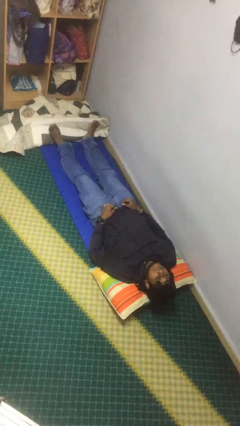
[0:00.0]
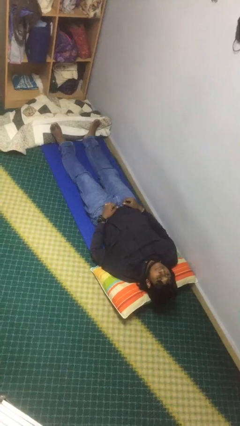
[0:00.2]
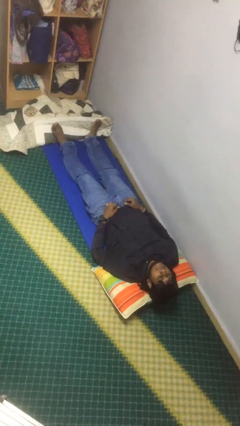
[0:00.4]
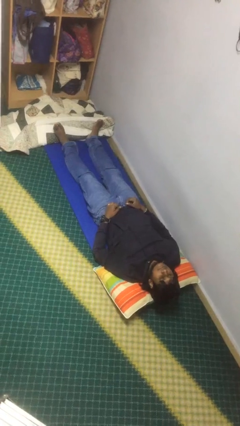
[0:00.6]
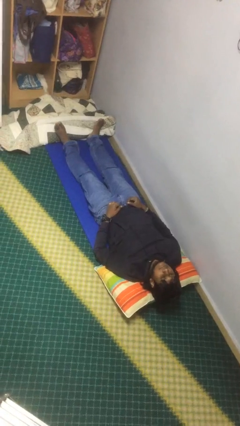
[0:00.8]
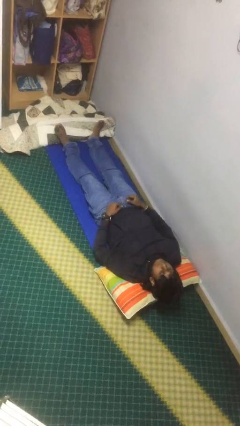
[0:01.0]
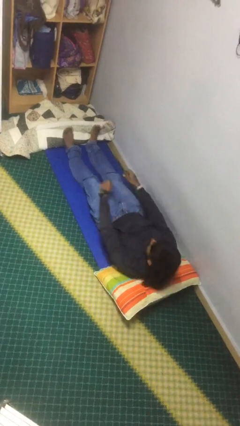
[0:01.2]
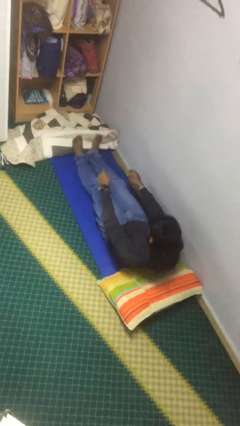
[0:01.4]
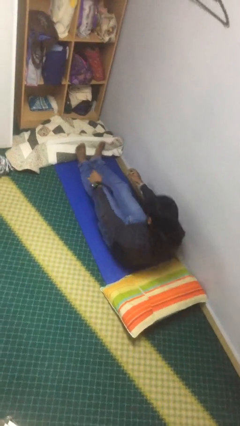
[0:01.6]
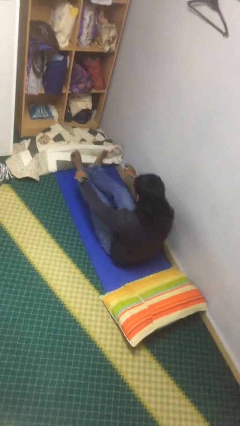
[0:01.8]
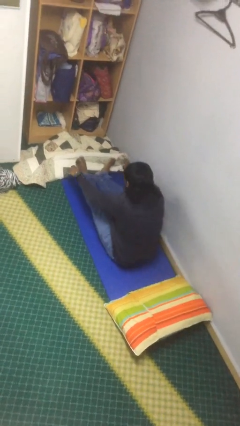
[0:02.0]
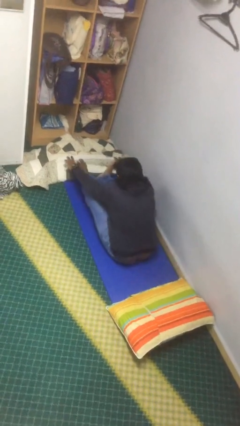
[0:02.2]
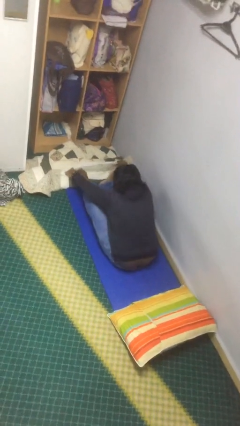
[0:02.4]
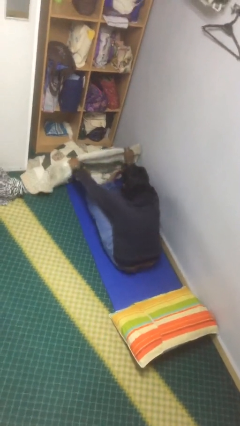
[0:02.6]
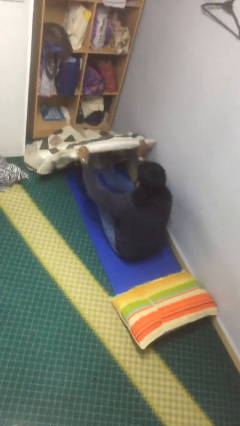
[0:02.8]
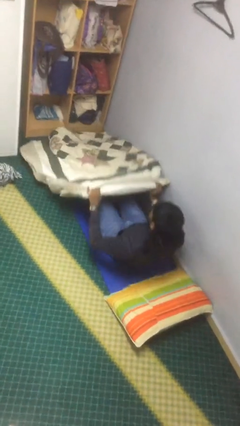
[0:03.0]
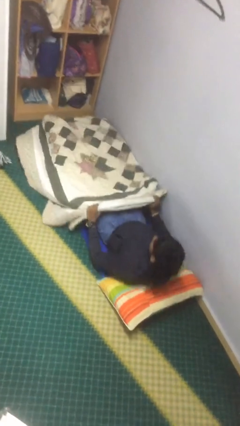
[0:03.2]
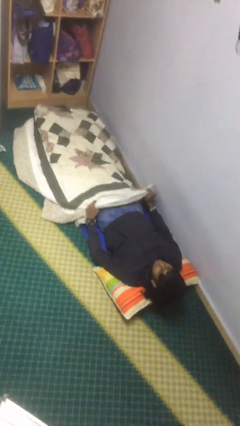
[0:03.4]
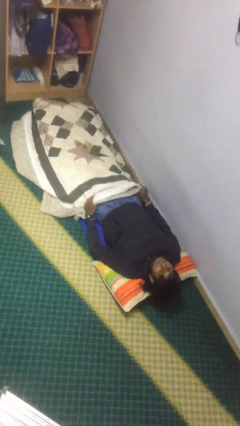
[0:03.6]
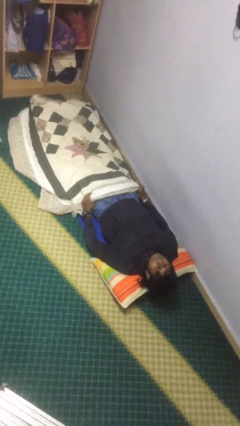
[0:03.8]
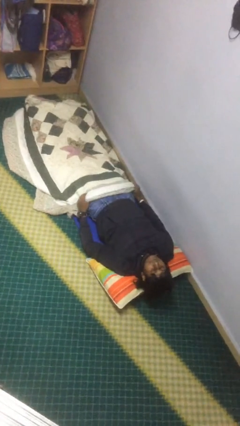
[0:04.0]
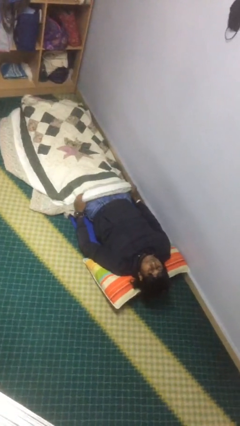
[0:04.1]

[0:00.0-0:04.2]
person covers with bedsheets

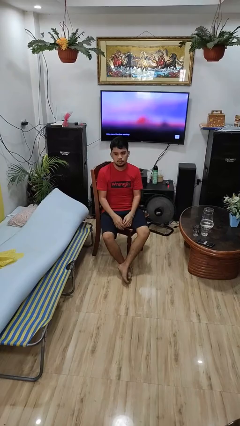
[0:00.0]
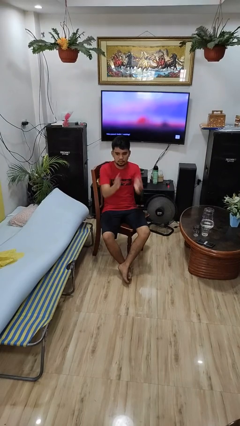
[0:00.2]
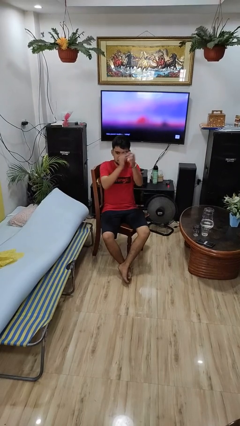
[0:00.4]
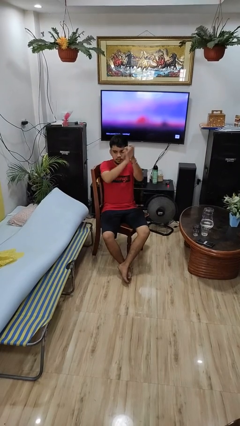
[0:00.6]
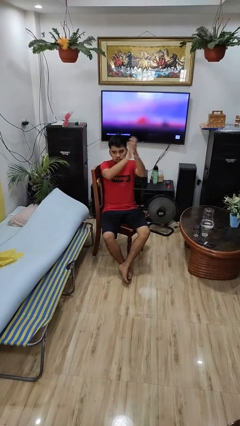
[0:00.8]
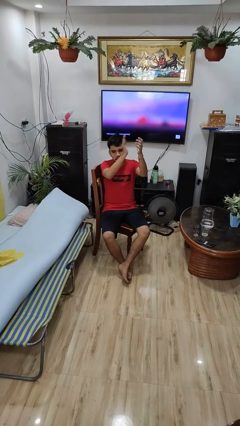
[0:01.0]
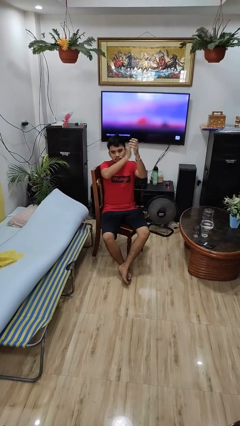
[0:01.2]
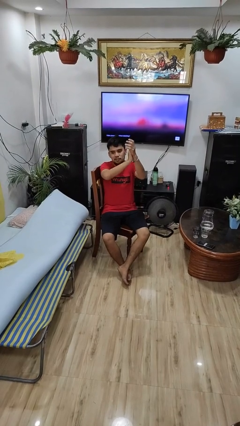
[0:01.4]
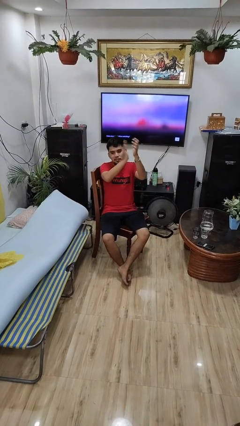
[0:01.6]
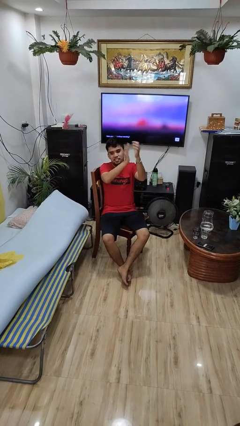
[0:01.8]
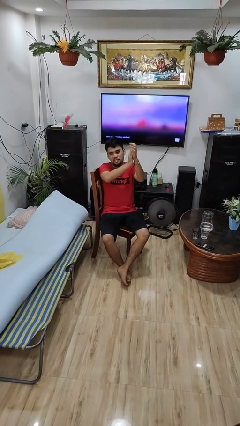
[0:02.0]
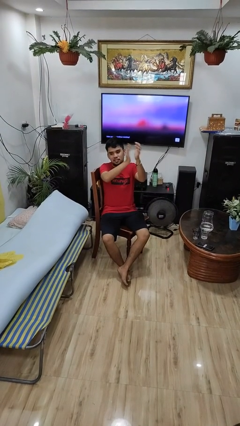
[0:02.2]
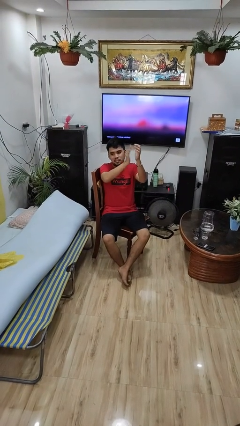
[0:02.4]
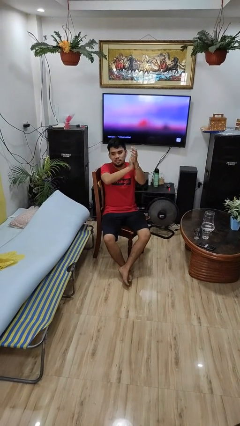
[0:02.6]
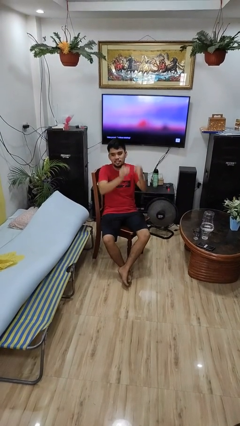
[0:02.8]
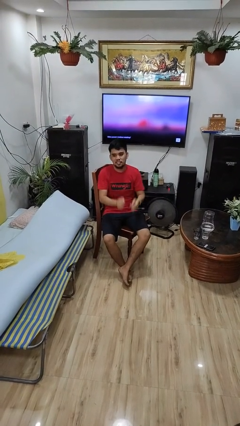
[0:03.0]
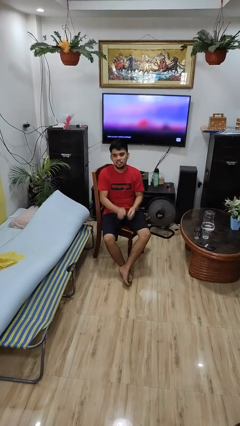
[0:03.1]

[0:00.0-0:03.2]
person claps hands

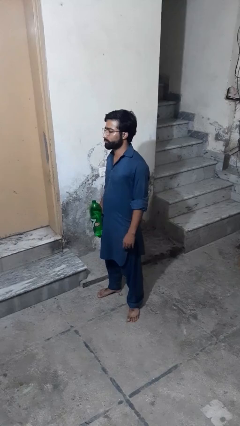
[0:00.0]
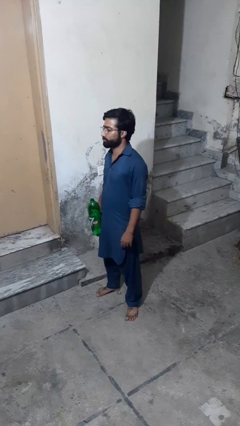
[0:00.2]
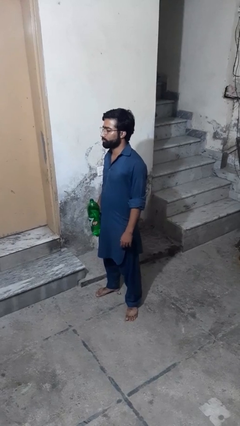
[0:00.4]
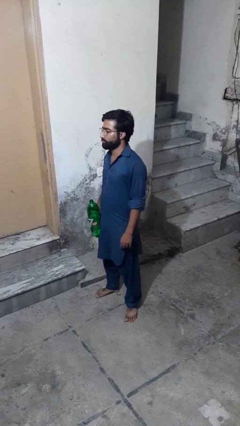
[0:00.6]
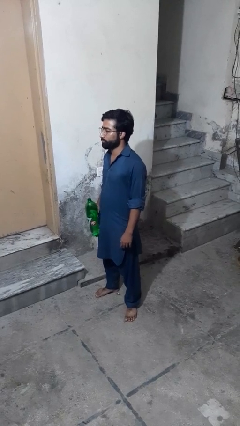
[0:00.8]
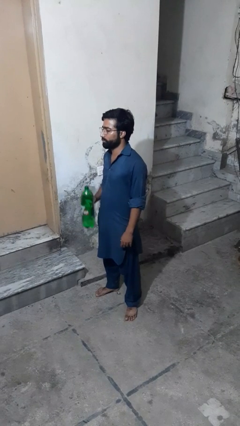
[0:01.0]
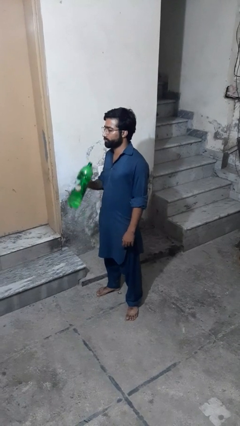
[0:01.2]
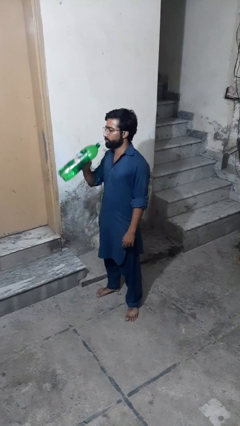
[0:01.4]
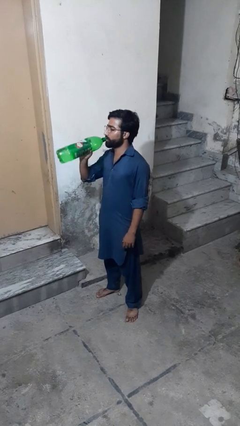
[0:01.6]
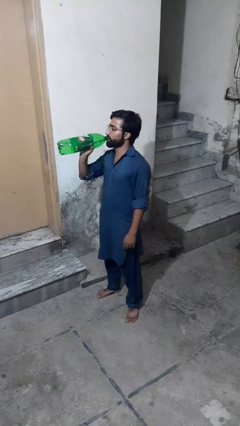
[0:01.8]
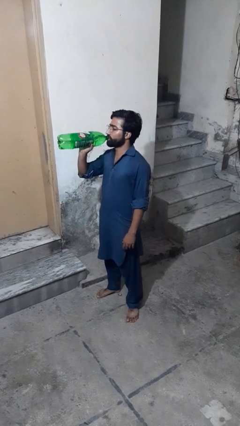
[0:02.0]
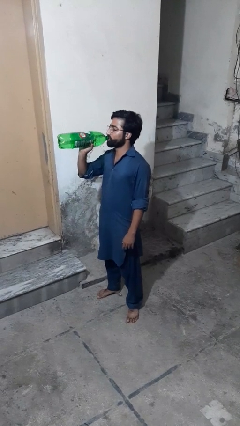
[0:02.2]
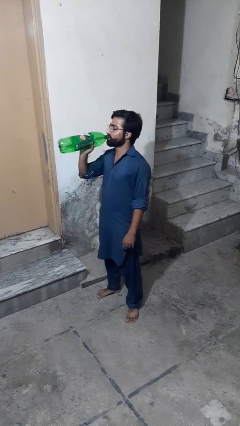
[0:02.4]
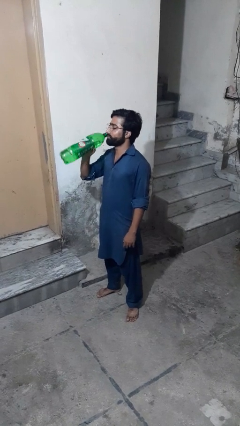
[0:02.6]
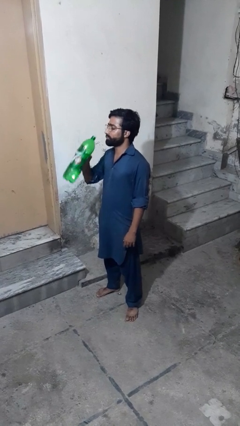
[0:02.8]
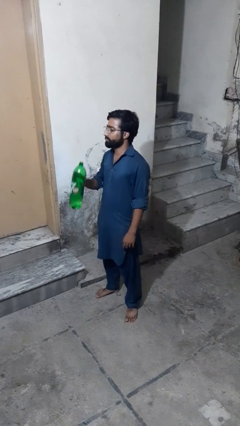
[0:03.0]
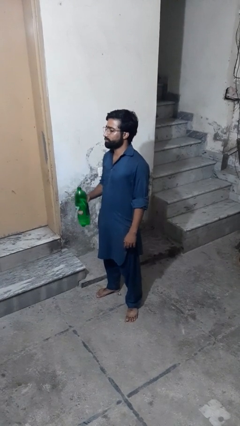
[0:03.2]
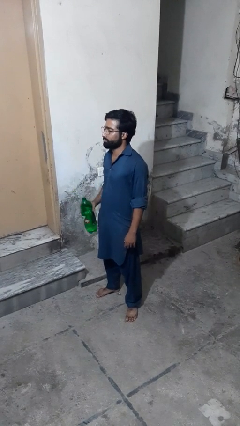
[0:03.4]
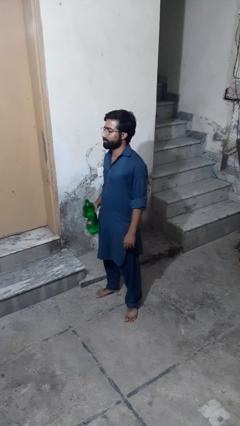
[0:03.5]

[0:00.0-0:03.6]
person drinks from bottle

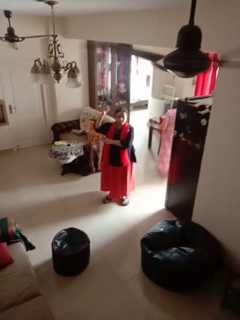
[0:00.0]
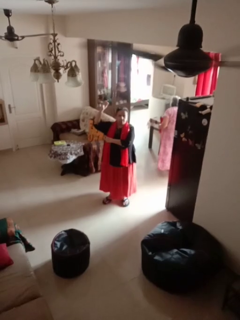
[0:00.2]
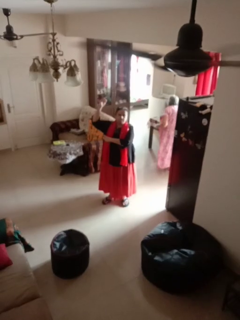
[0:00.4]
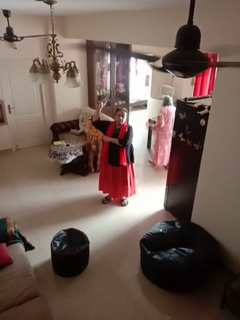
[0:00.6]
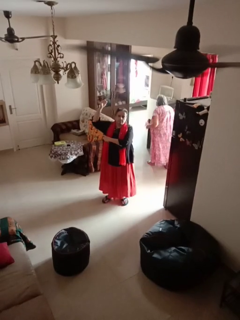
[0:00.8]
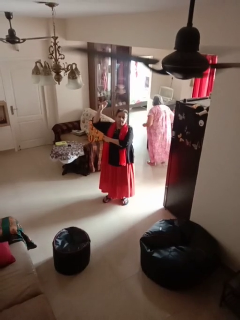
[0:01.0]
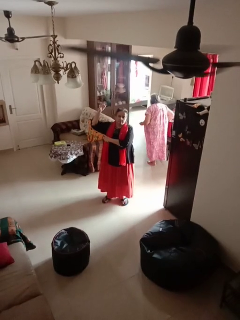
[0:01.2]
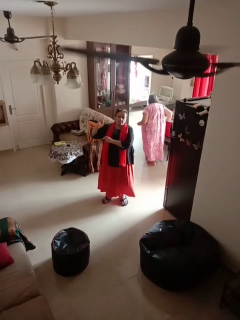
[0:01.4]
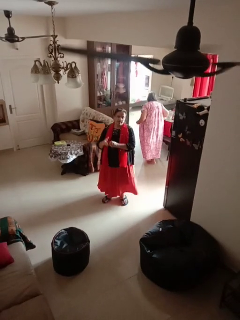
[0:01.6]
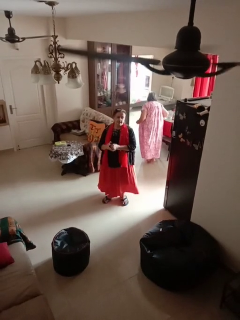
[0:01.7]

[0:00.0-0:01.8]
person applies deodorant

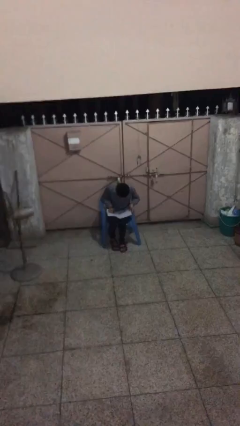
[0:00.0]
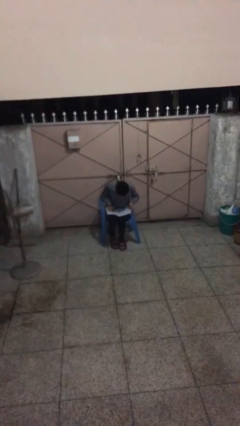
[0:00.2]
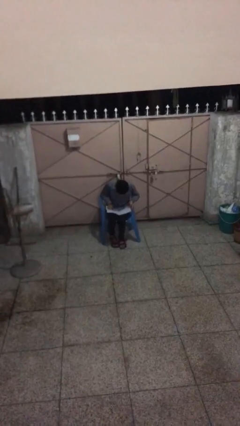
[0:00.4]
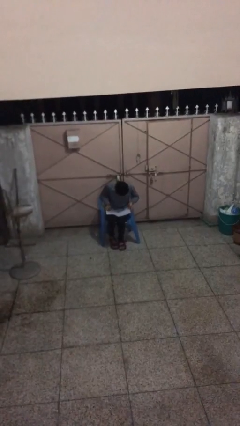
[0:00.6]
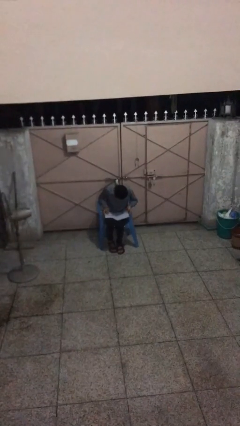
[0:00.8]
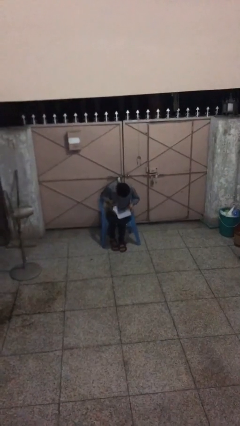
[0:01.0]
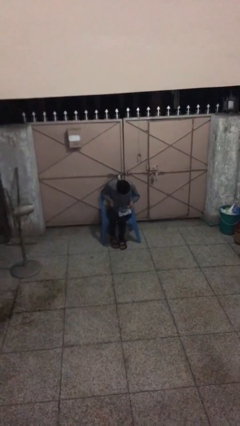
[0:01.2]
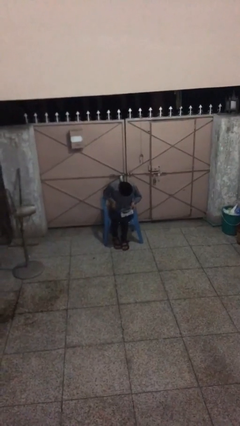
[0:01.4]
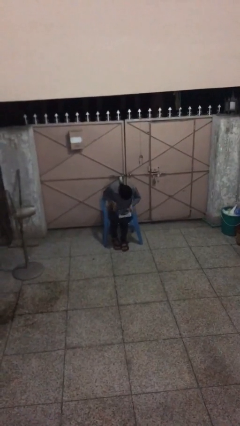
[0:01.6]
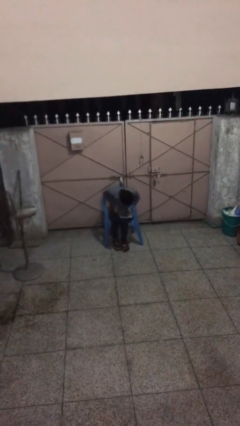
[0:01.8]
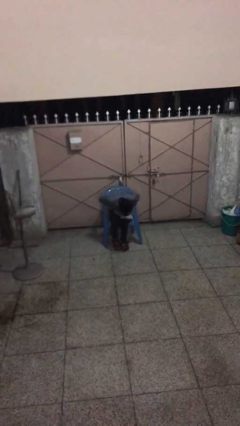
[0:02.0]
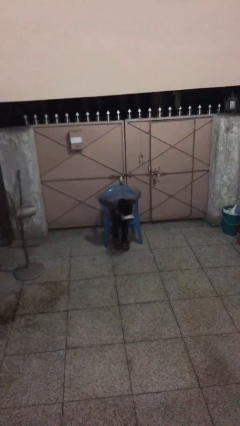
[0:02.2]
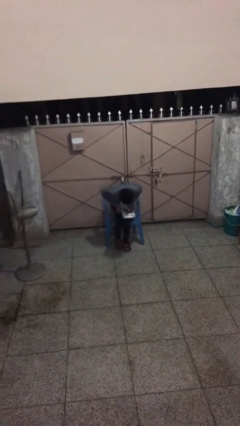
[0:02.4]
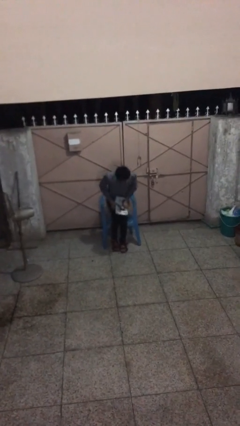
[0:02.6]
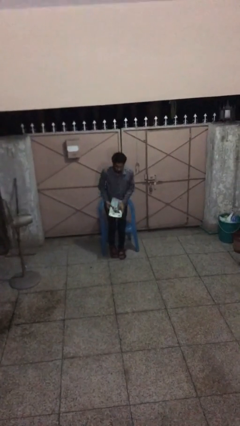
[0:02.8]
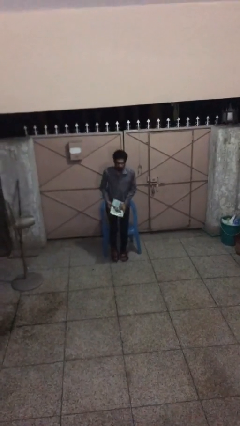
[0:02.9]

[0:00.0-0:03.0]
person stands up

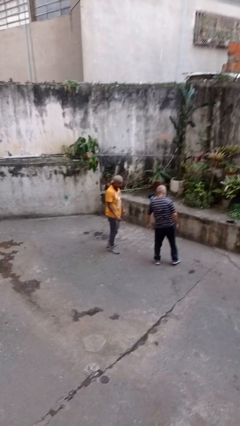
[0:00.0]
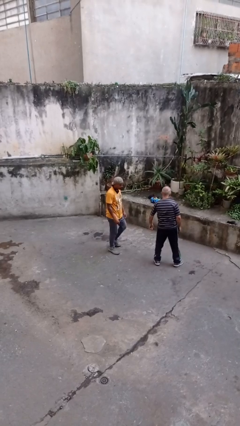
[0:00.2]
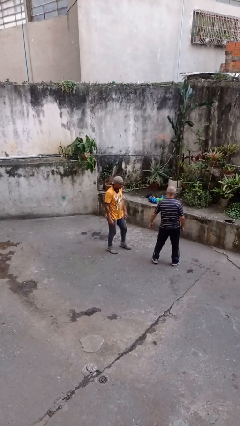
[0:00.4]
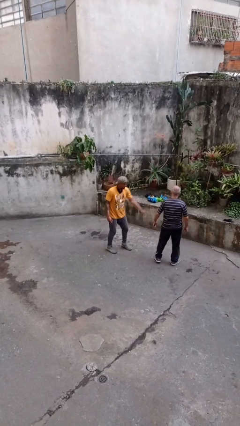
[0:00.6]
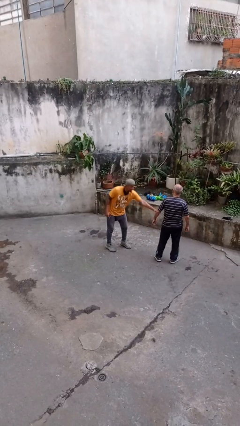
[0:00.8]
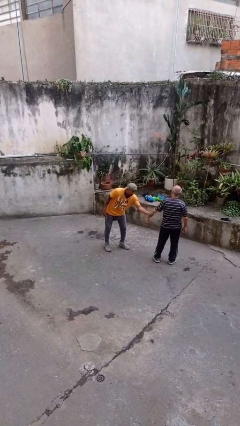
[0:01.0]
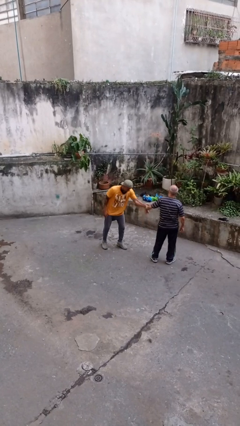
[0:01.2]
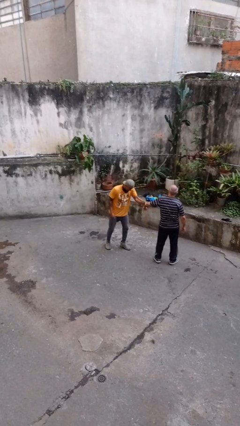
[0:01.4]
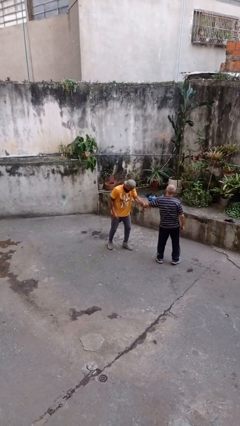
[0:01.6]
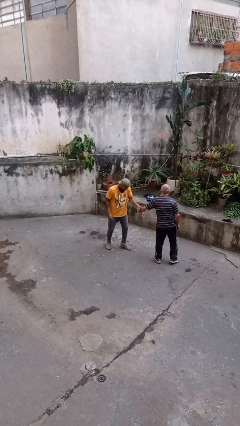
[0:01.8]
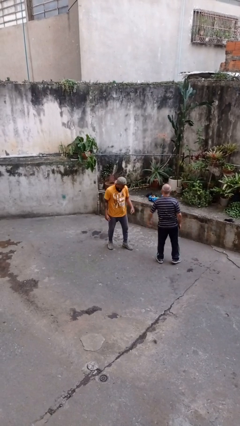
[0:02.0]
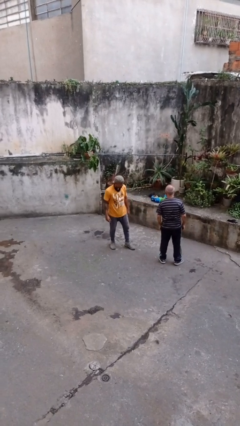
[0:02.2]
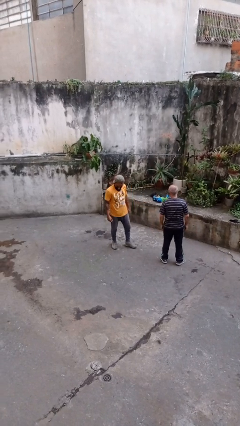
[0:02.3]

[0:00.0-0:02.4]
person grabs person by forearm
